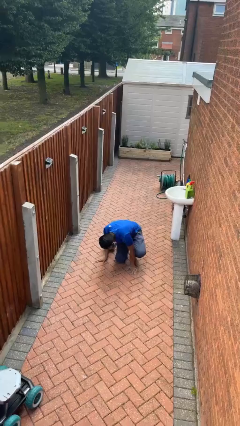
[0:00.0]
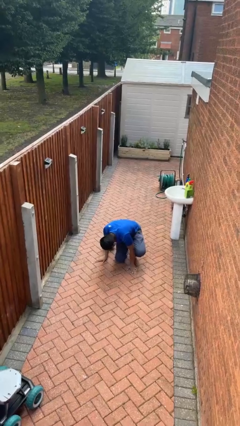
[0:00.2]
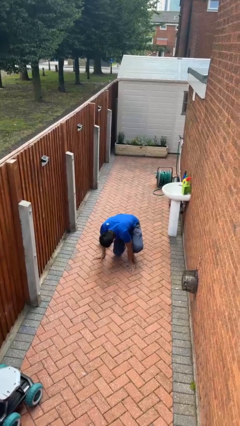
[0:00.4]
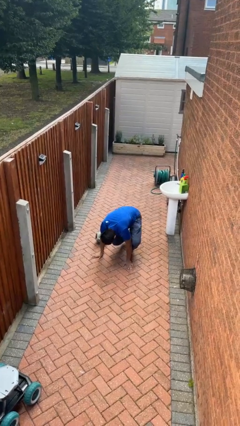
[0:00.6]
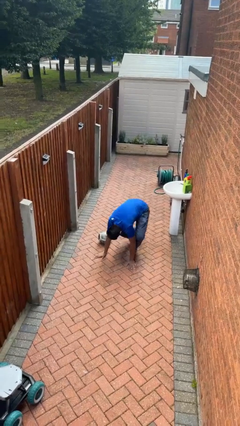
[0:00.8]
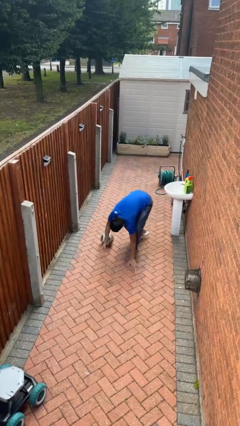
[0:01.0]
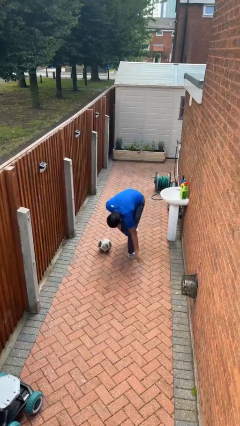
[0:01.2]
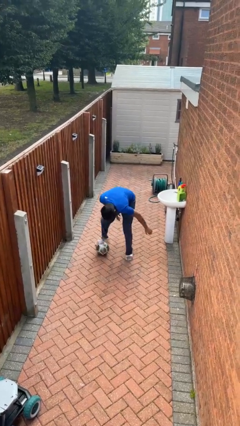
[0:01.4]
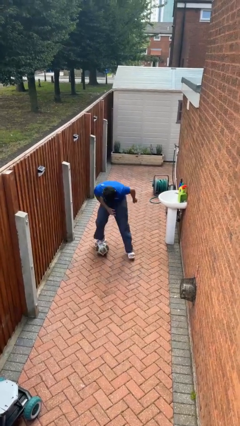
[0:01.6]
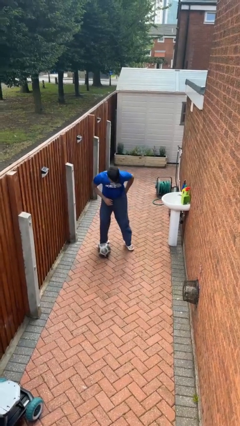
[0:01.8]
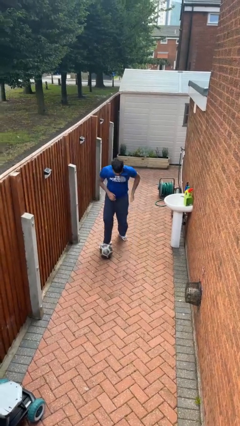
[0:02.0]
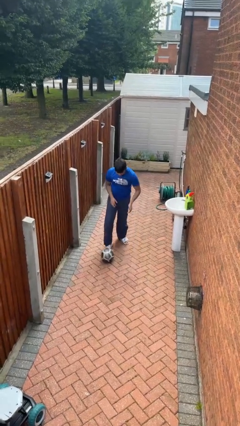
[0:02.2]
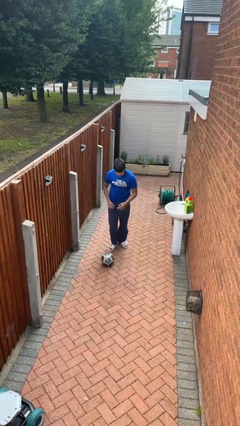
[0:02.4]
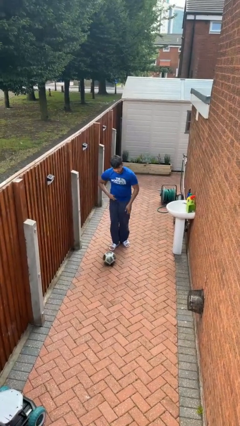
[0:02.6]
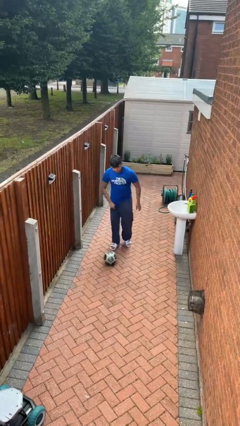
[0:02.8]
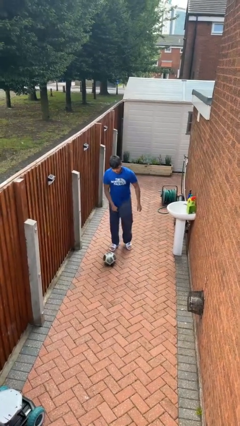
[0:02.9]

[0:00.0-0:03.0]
person stands up from floor

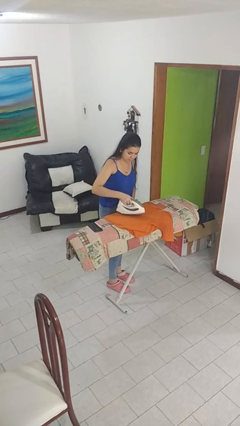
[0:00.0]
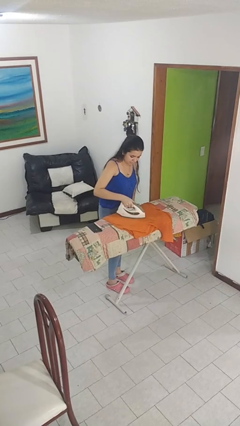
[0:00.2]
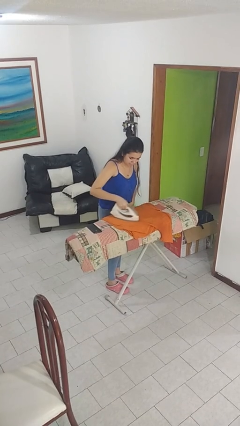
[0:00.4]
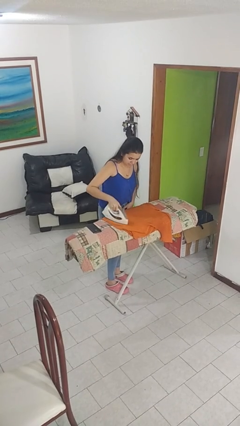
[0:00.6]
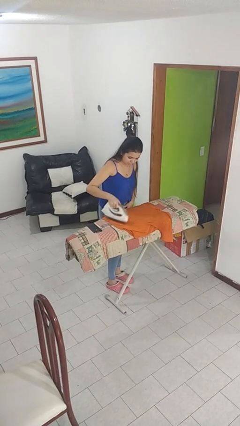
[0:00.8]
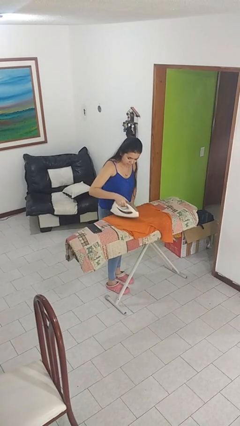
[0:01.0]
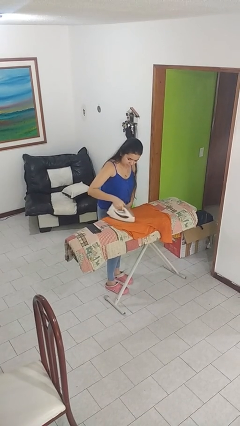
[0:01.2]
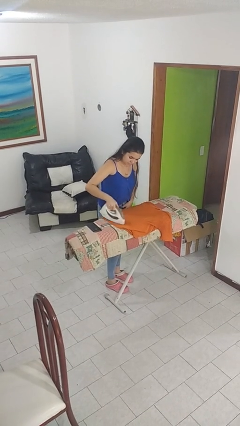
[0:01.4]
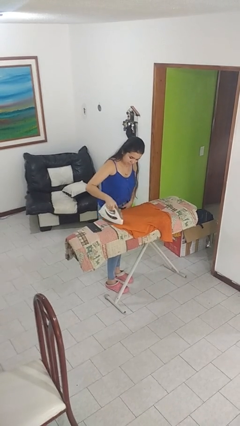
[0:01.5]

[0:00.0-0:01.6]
person irons clothes

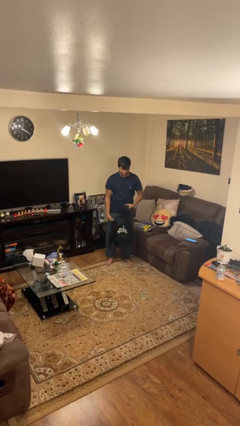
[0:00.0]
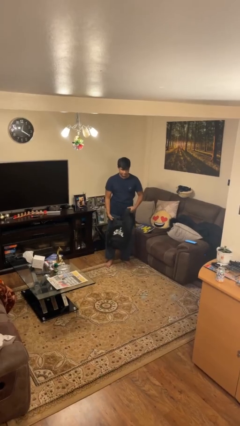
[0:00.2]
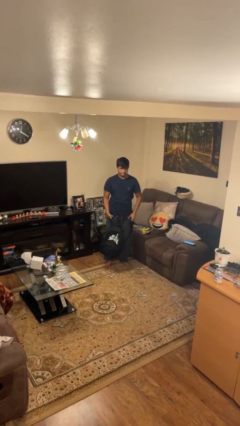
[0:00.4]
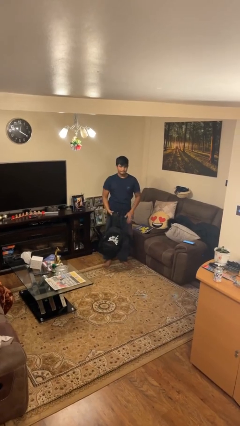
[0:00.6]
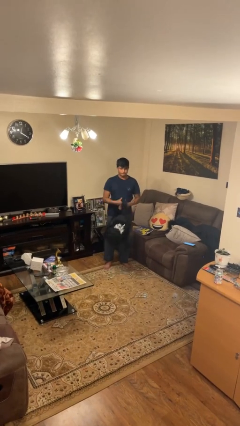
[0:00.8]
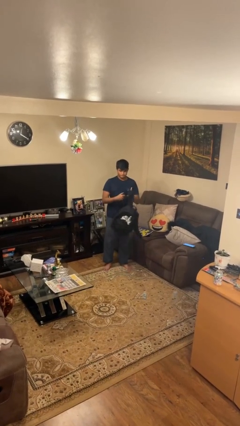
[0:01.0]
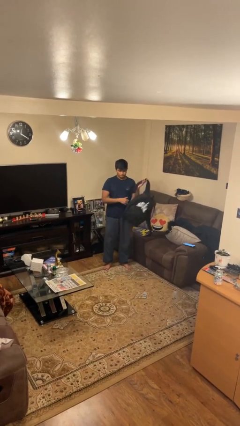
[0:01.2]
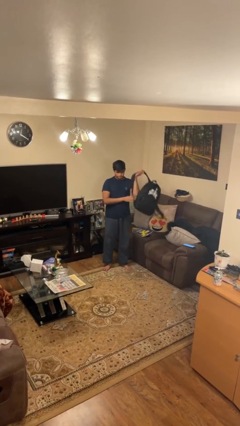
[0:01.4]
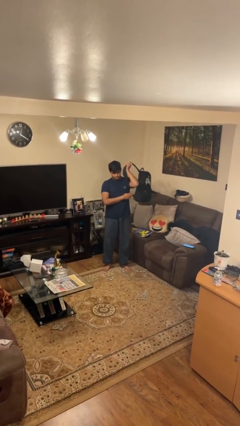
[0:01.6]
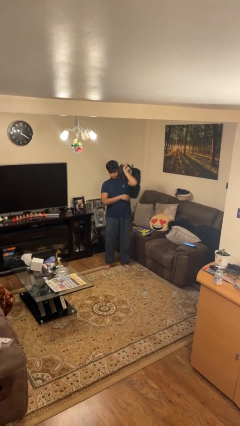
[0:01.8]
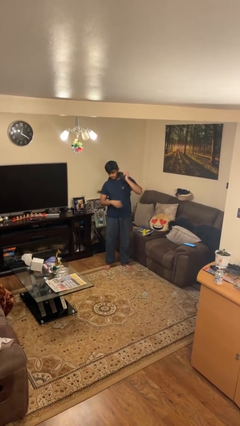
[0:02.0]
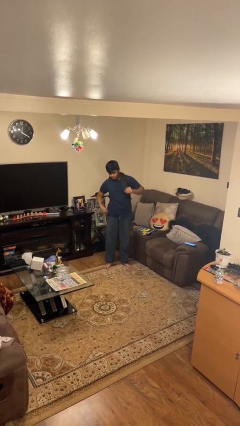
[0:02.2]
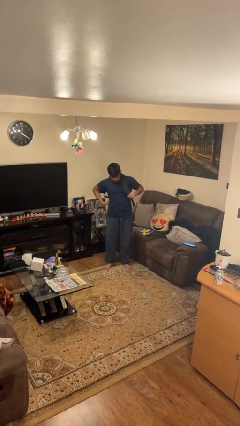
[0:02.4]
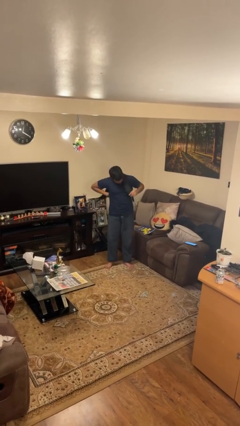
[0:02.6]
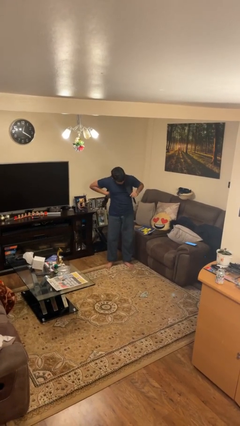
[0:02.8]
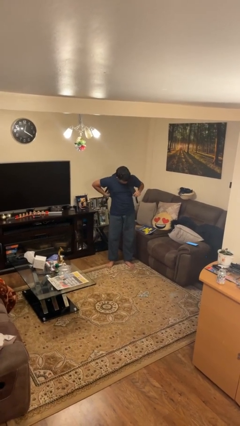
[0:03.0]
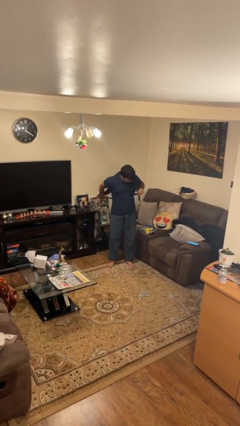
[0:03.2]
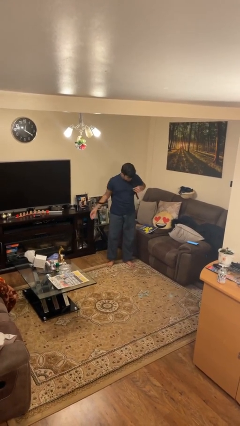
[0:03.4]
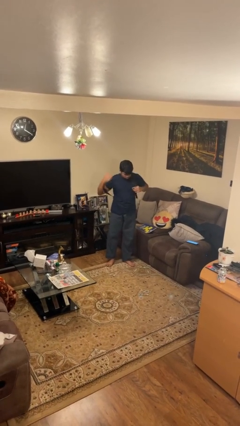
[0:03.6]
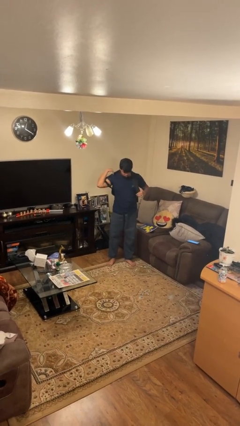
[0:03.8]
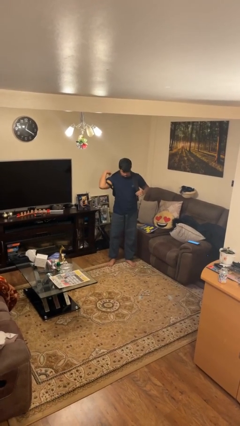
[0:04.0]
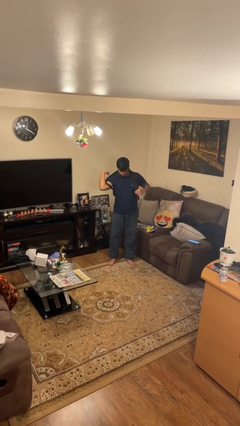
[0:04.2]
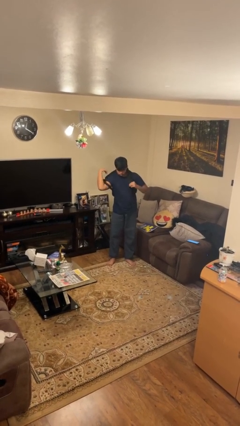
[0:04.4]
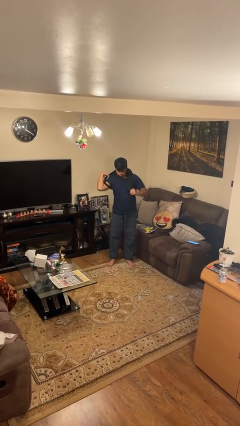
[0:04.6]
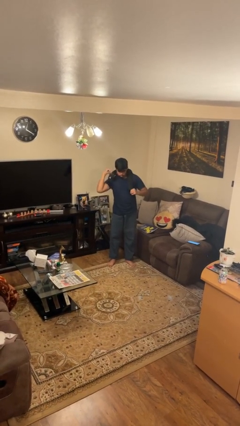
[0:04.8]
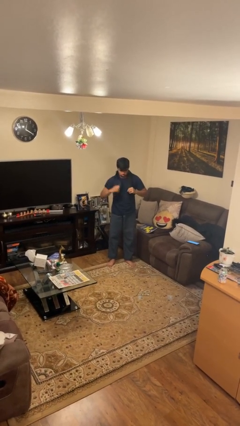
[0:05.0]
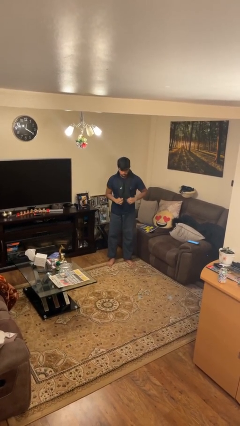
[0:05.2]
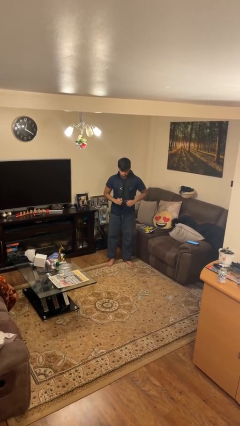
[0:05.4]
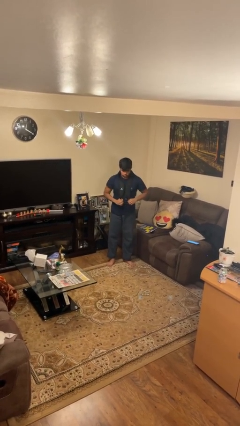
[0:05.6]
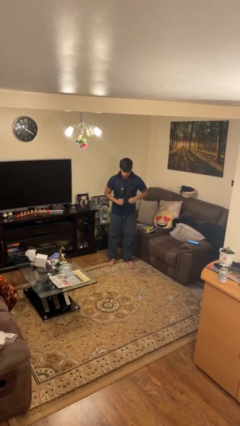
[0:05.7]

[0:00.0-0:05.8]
person puts on backpack

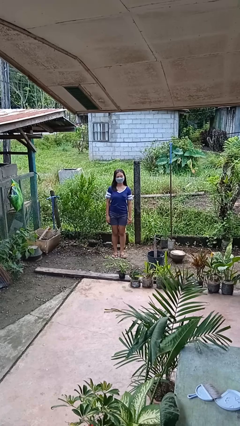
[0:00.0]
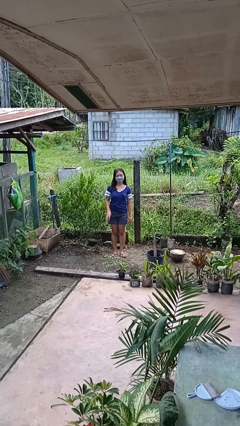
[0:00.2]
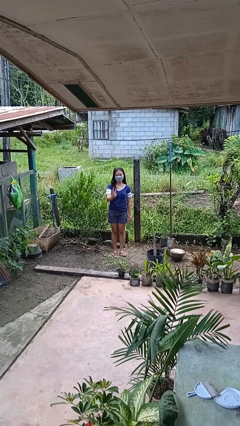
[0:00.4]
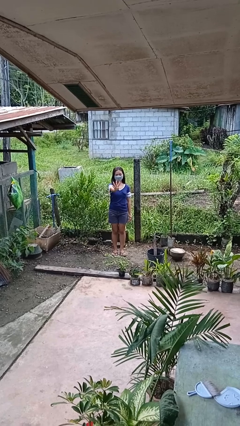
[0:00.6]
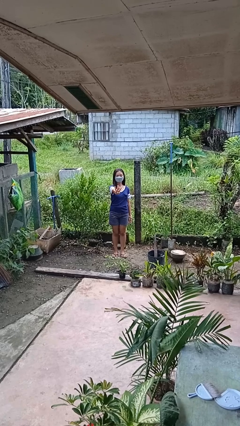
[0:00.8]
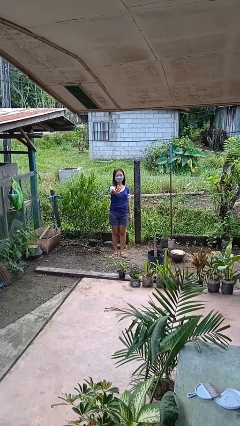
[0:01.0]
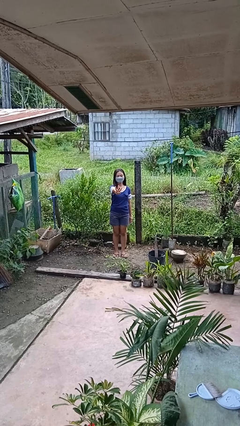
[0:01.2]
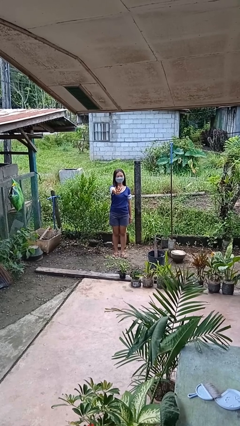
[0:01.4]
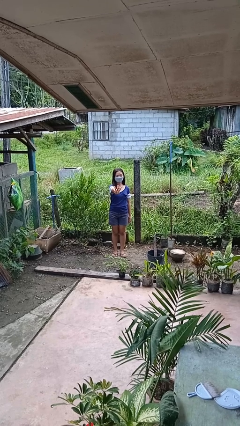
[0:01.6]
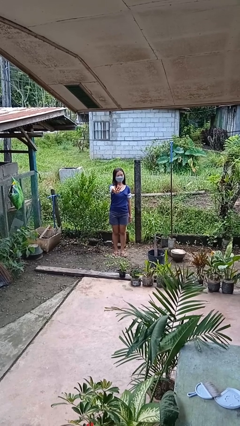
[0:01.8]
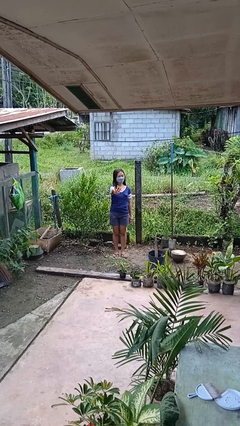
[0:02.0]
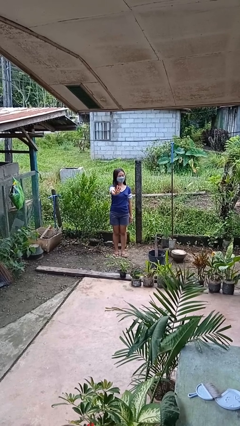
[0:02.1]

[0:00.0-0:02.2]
person gestures number four

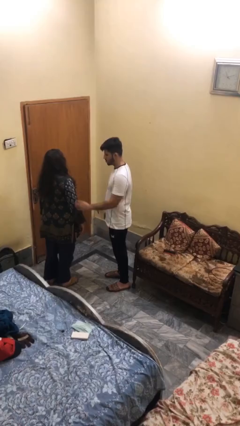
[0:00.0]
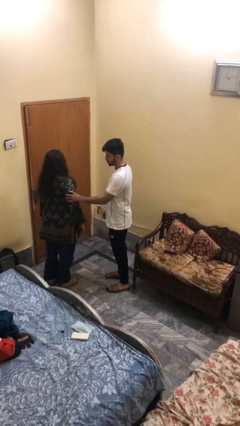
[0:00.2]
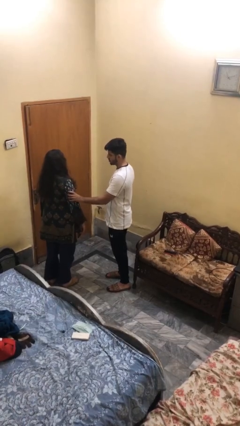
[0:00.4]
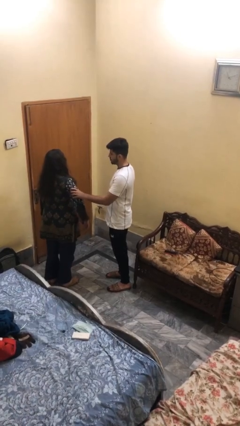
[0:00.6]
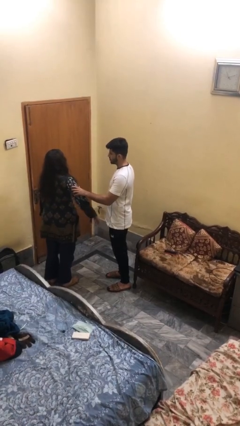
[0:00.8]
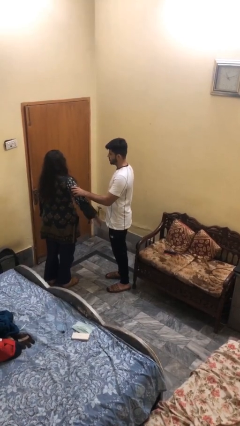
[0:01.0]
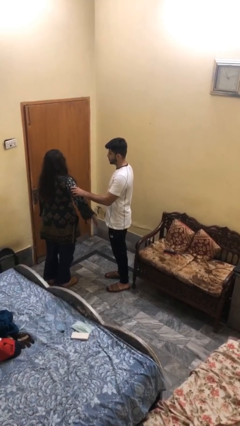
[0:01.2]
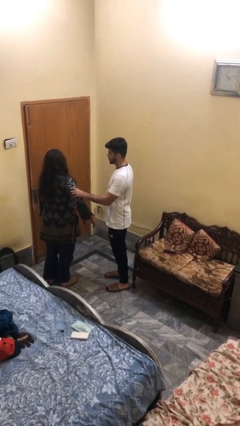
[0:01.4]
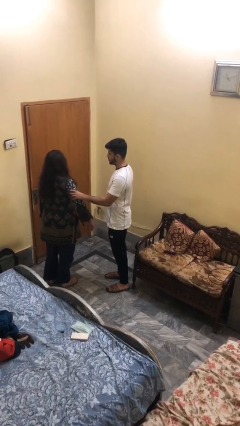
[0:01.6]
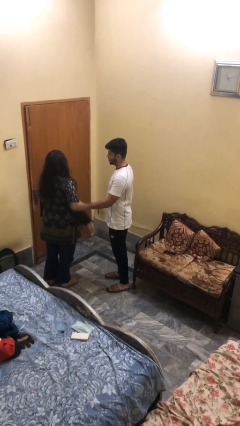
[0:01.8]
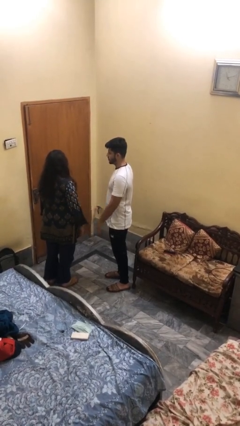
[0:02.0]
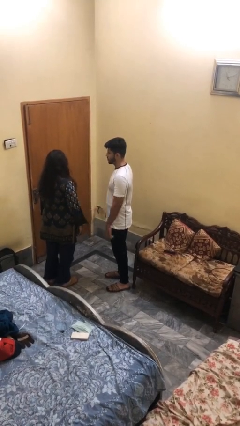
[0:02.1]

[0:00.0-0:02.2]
person grabs person by bicep

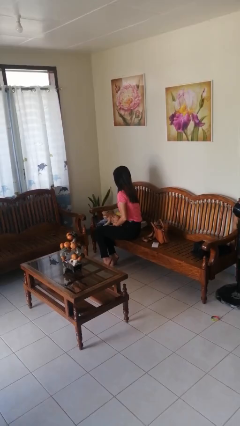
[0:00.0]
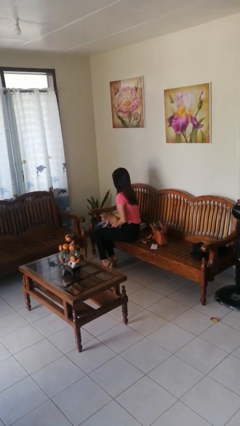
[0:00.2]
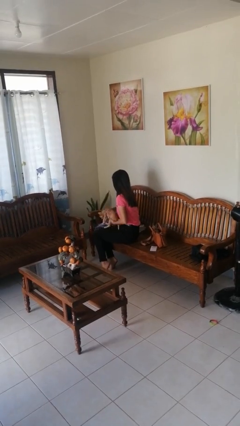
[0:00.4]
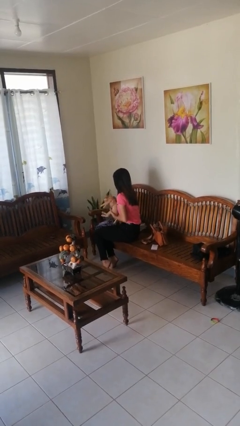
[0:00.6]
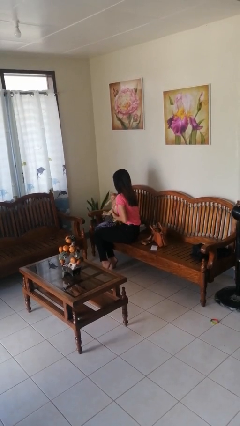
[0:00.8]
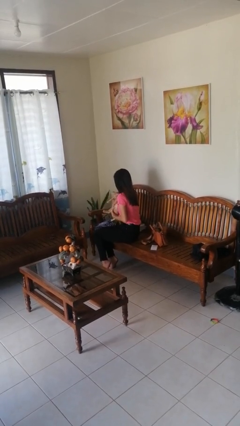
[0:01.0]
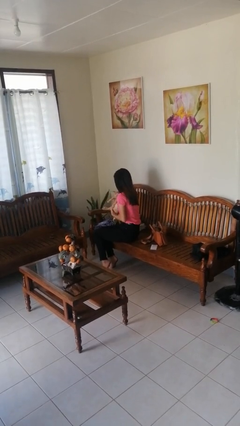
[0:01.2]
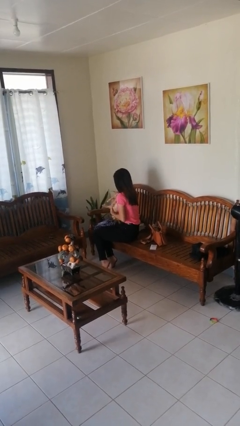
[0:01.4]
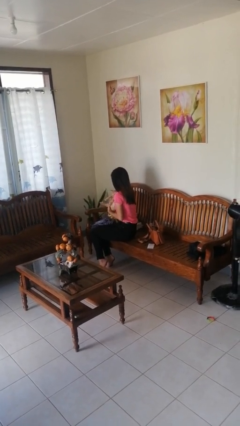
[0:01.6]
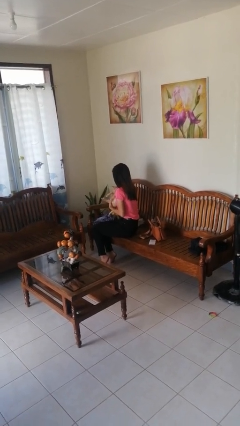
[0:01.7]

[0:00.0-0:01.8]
person hugs cat

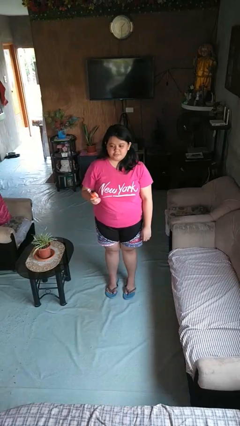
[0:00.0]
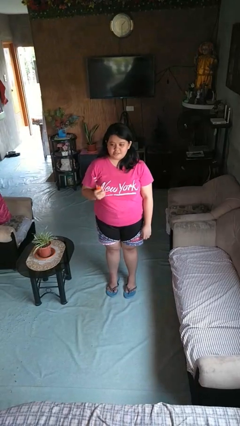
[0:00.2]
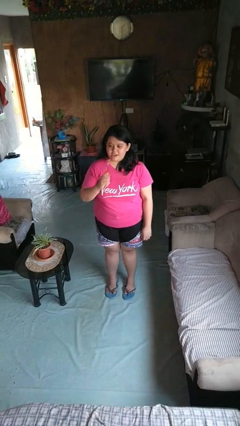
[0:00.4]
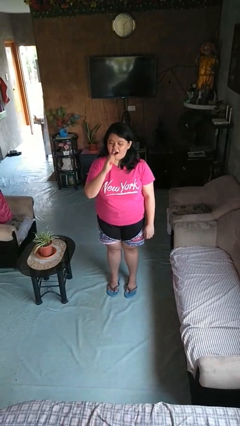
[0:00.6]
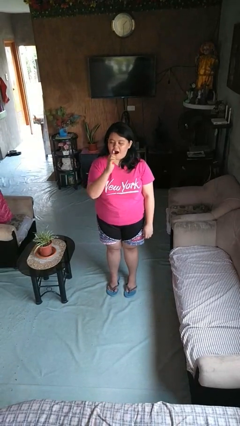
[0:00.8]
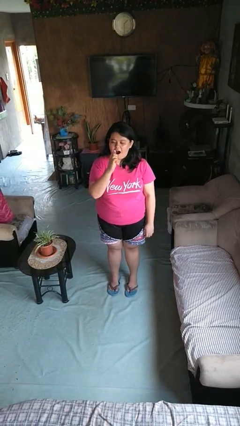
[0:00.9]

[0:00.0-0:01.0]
person brushes teeth
